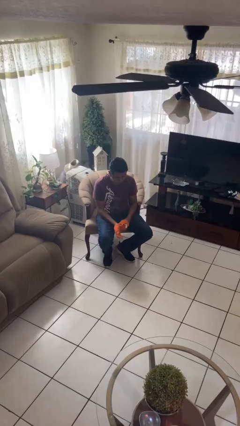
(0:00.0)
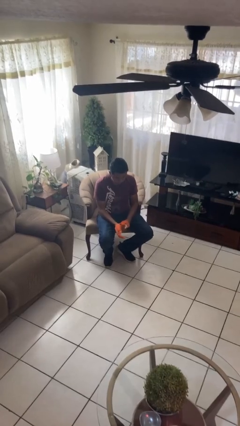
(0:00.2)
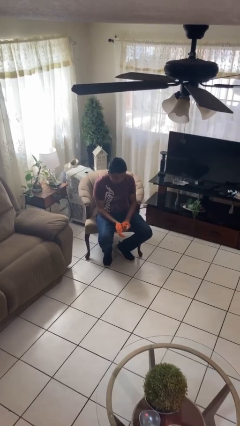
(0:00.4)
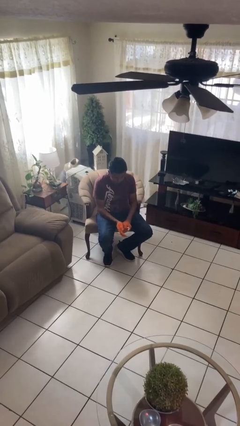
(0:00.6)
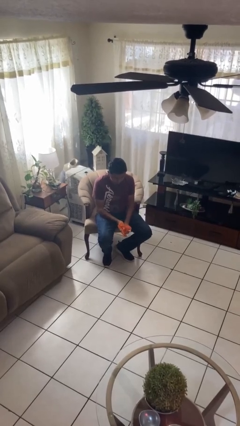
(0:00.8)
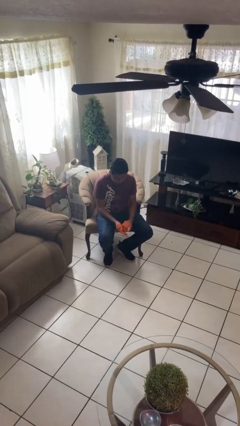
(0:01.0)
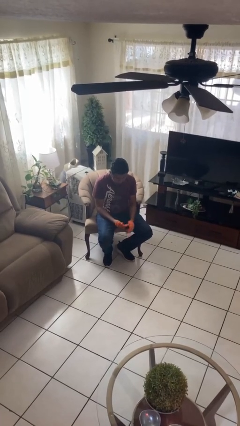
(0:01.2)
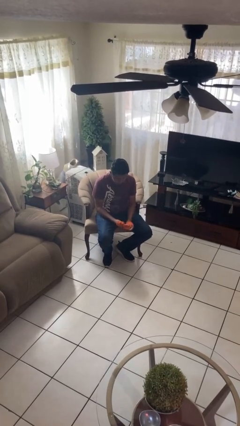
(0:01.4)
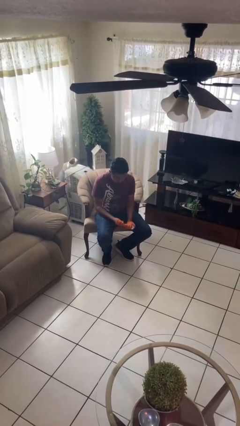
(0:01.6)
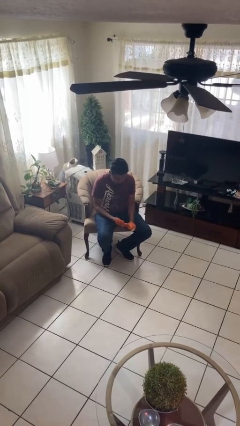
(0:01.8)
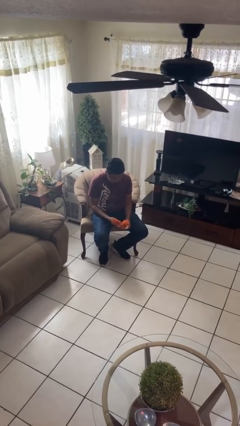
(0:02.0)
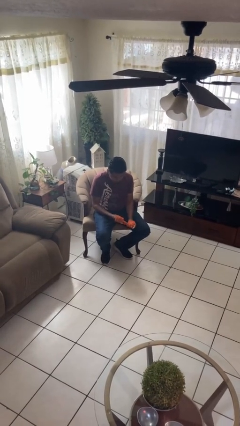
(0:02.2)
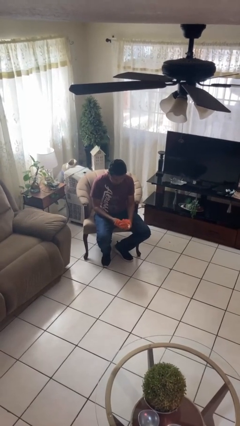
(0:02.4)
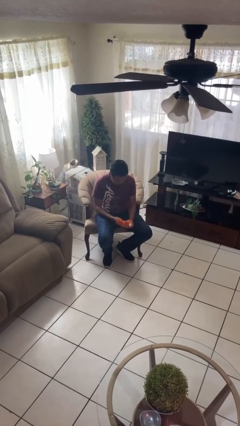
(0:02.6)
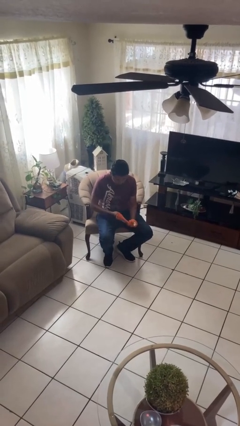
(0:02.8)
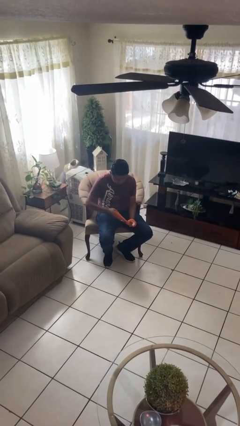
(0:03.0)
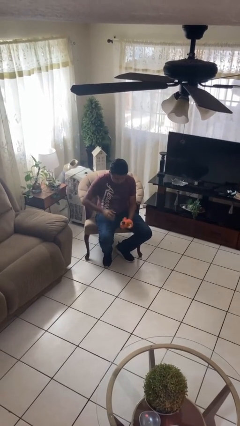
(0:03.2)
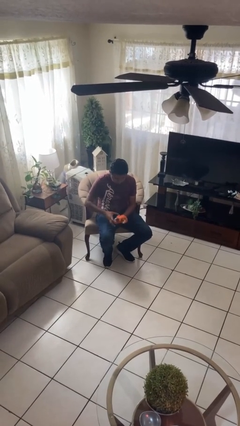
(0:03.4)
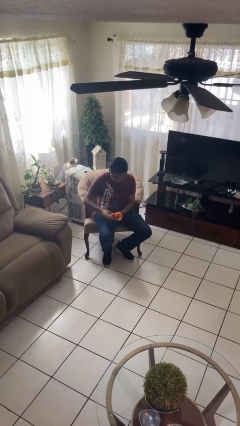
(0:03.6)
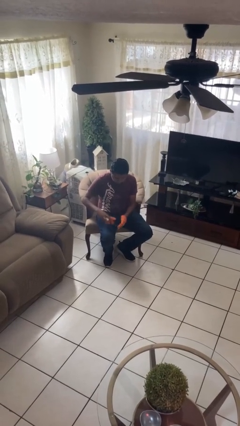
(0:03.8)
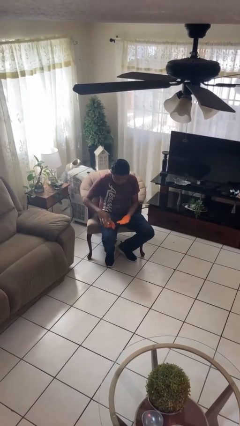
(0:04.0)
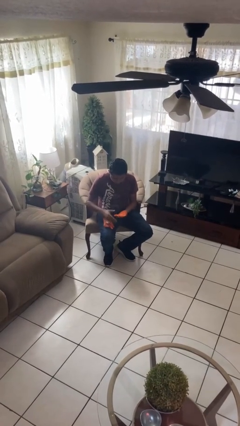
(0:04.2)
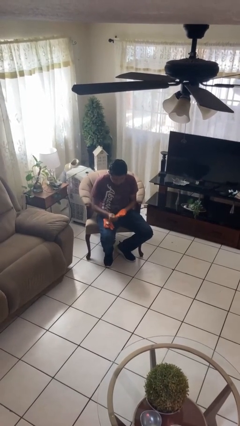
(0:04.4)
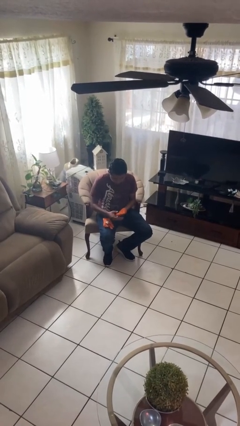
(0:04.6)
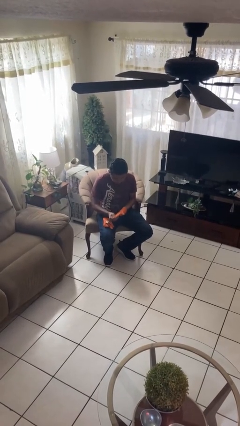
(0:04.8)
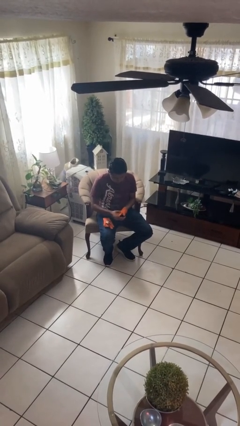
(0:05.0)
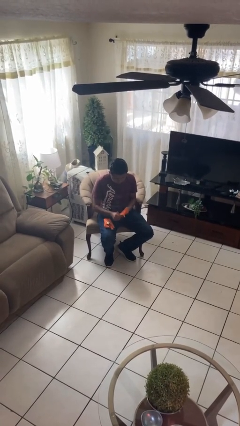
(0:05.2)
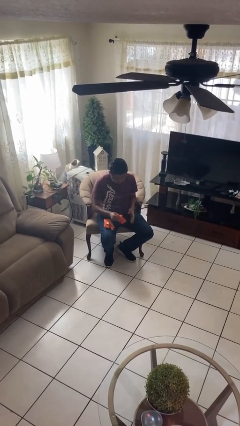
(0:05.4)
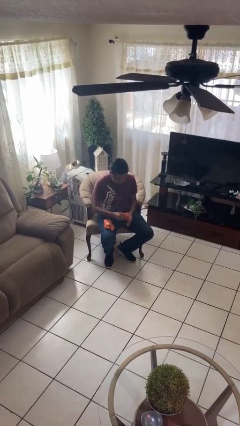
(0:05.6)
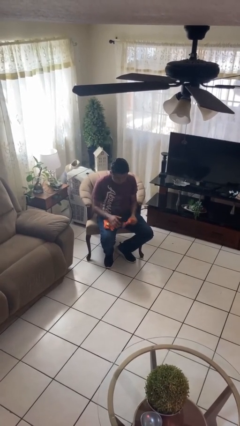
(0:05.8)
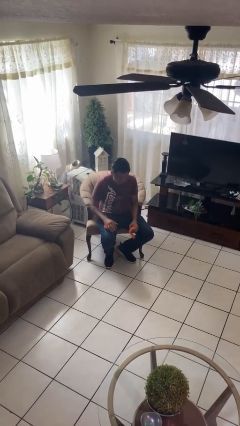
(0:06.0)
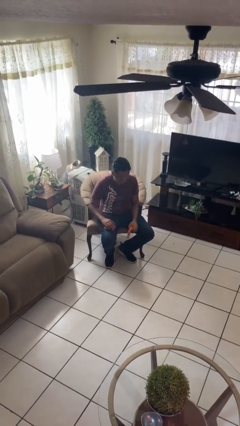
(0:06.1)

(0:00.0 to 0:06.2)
person takes off gloves

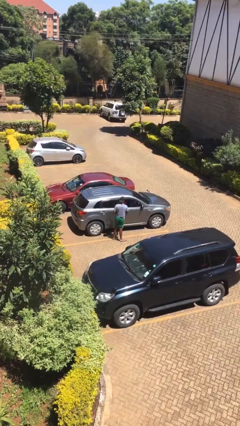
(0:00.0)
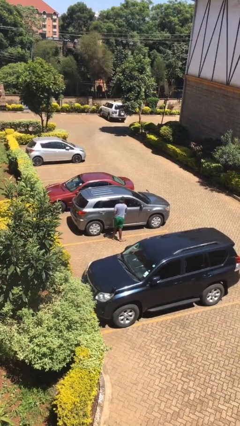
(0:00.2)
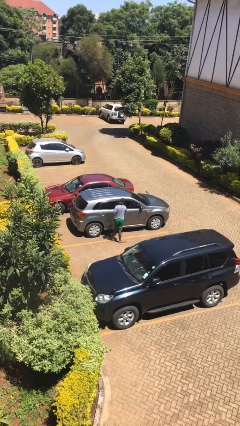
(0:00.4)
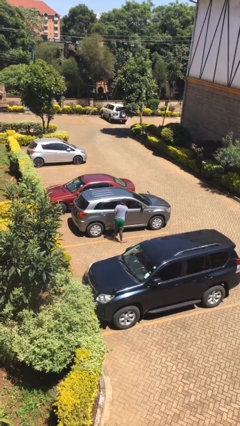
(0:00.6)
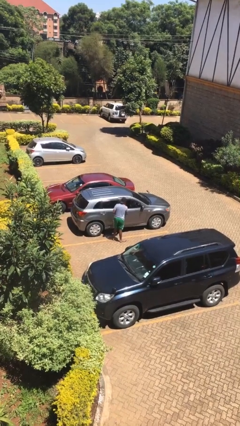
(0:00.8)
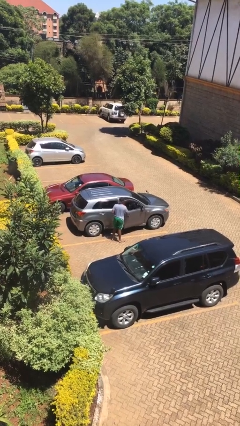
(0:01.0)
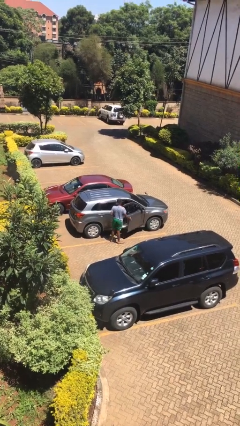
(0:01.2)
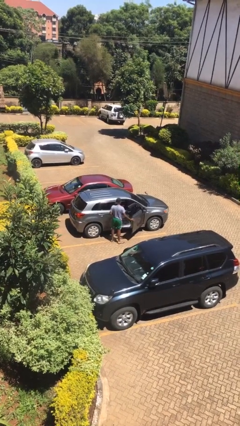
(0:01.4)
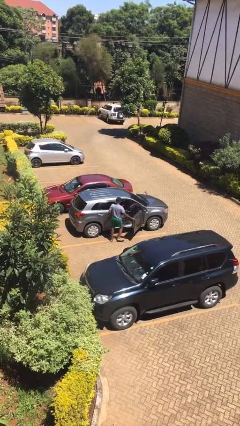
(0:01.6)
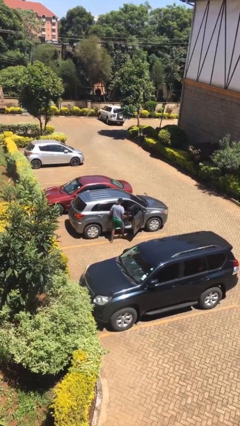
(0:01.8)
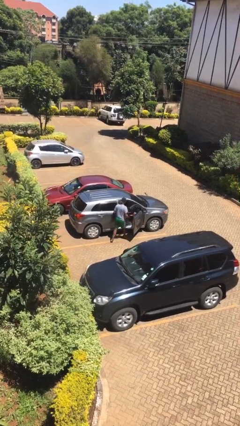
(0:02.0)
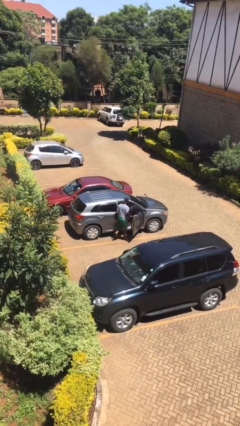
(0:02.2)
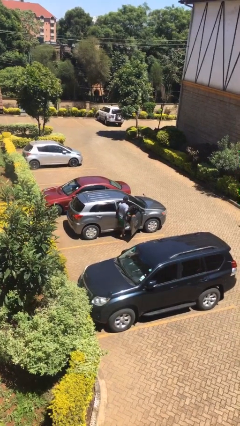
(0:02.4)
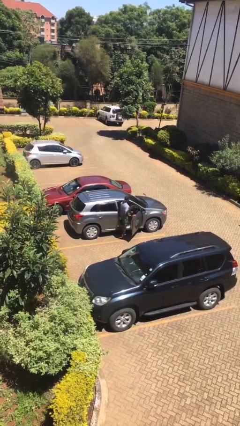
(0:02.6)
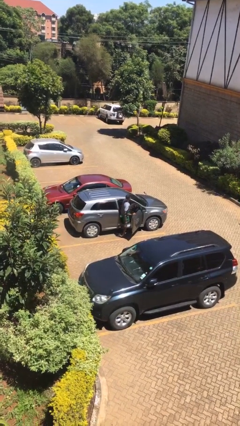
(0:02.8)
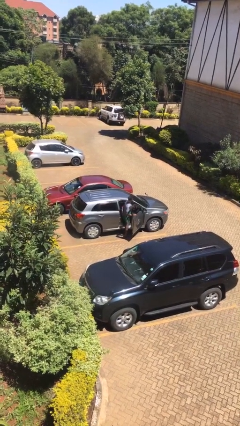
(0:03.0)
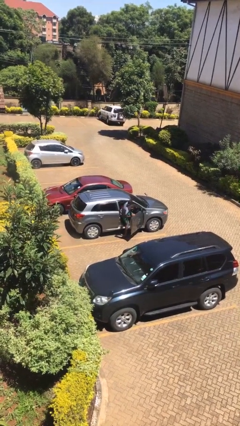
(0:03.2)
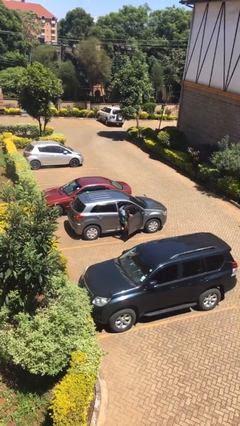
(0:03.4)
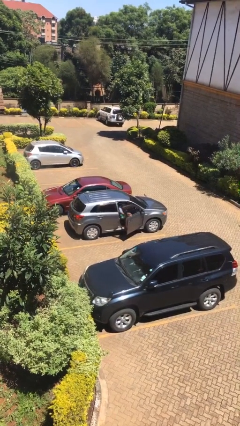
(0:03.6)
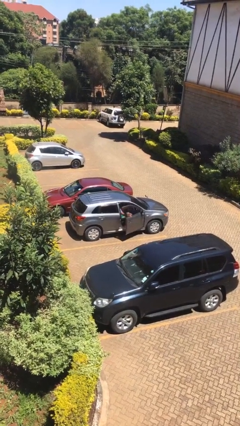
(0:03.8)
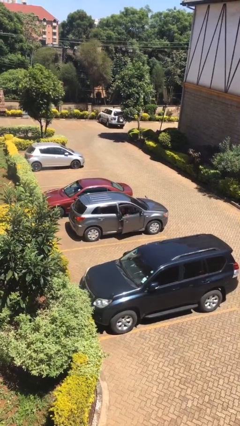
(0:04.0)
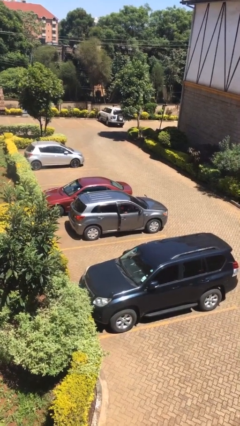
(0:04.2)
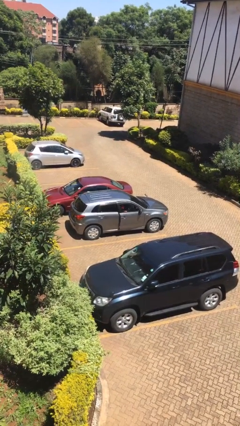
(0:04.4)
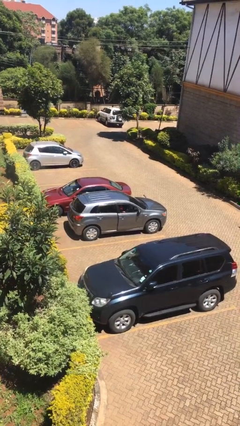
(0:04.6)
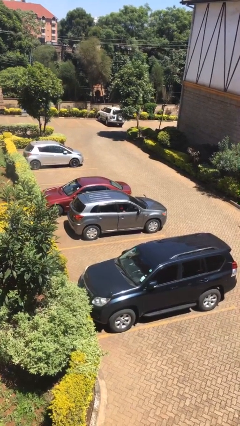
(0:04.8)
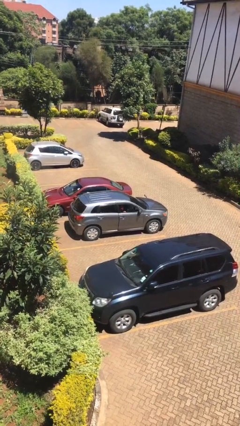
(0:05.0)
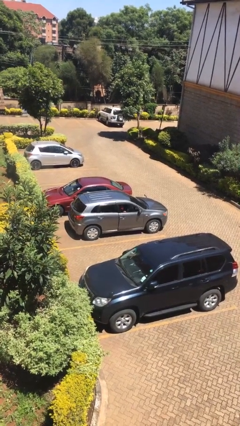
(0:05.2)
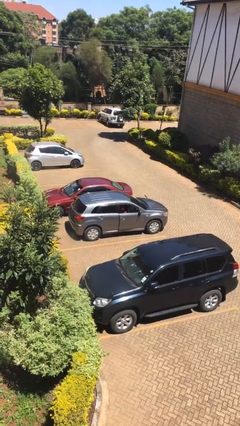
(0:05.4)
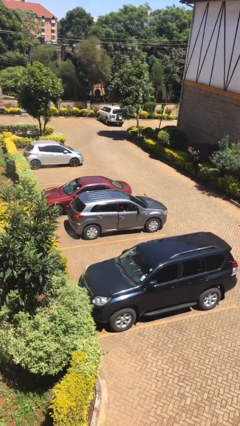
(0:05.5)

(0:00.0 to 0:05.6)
car picks up person

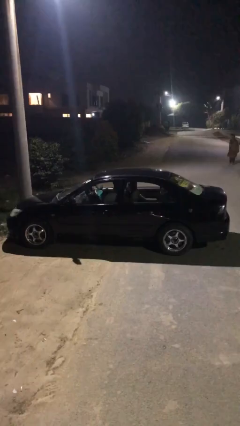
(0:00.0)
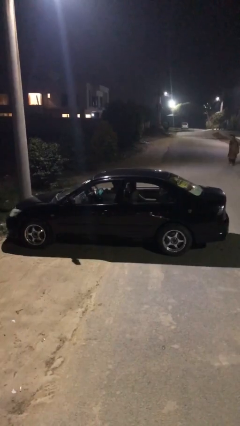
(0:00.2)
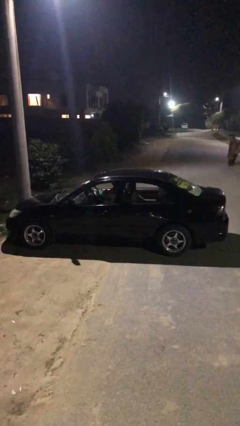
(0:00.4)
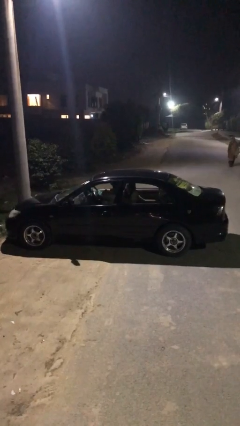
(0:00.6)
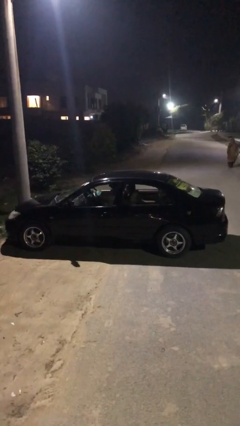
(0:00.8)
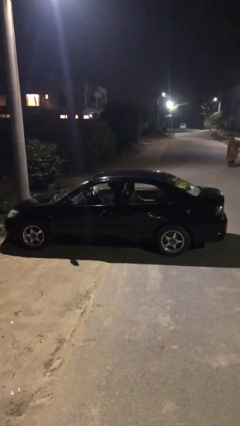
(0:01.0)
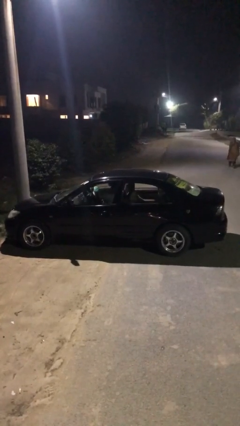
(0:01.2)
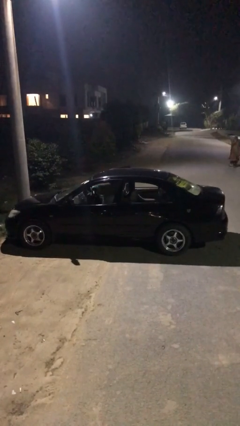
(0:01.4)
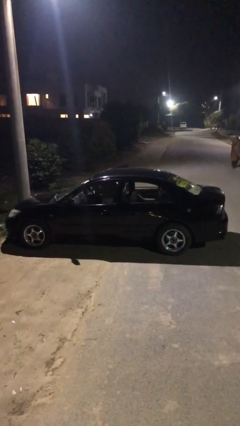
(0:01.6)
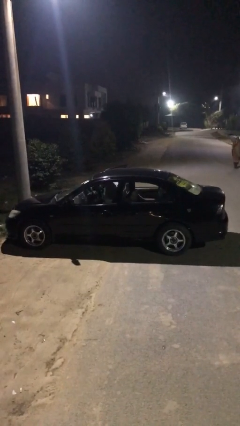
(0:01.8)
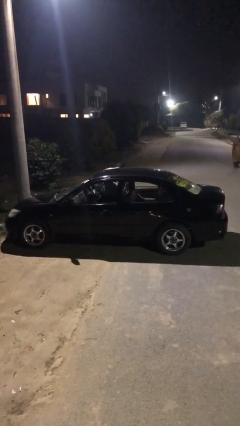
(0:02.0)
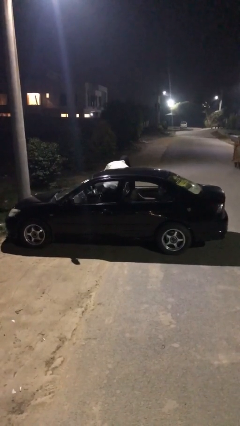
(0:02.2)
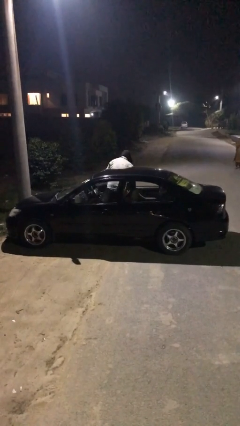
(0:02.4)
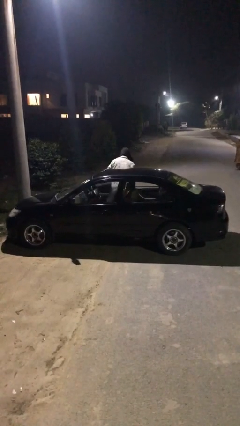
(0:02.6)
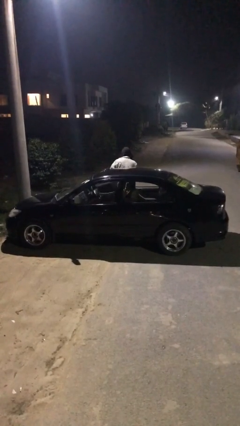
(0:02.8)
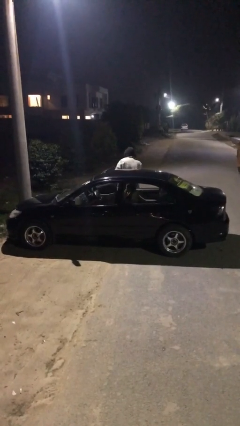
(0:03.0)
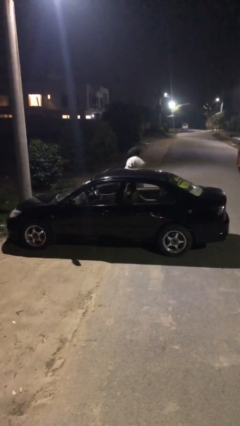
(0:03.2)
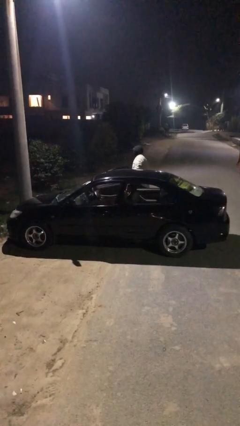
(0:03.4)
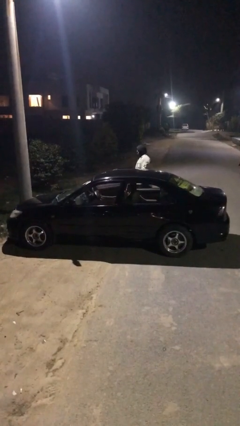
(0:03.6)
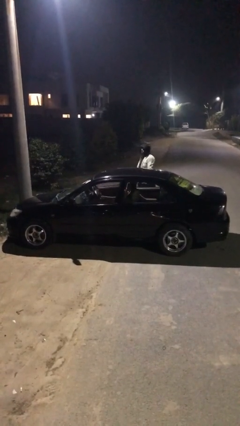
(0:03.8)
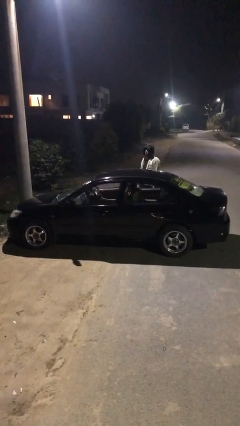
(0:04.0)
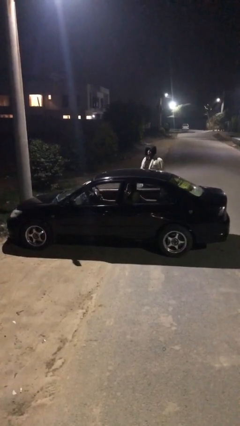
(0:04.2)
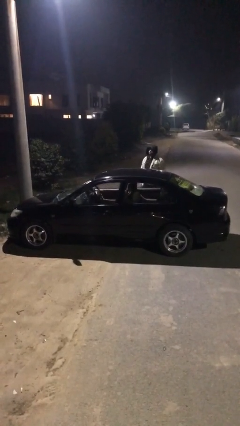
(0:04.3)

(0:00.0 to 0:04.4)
car drops off person

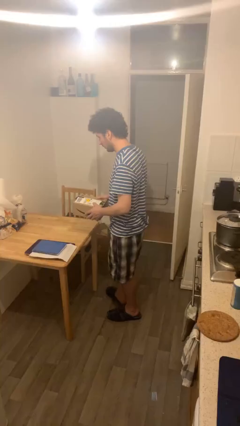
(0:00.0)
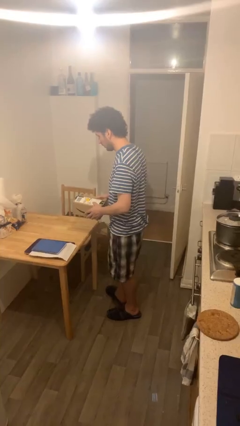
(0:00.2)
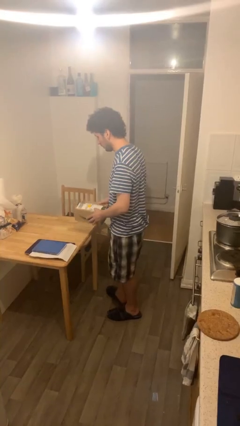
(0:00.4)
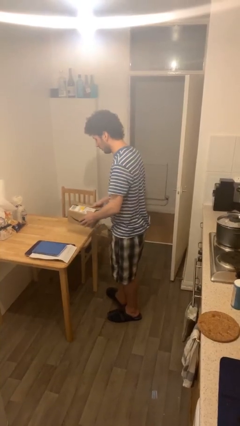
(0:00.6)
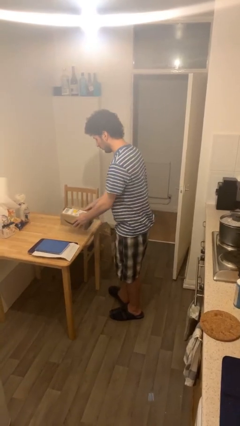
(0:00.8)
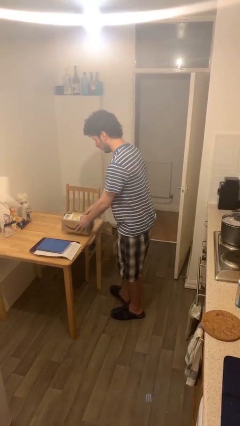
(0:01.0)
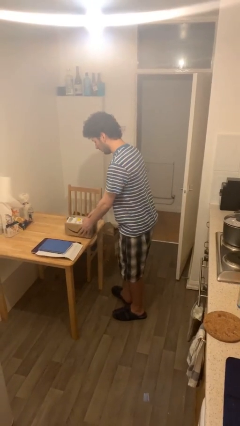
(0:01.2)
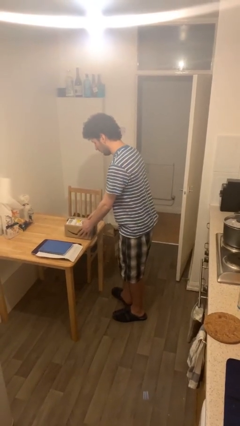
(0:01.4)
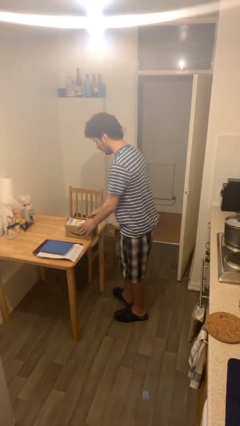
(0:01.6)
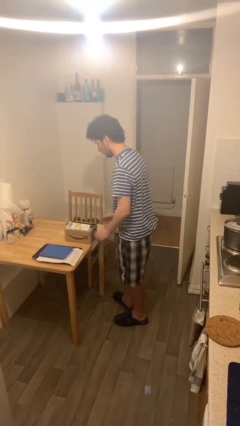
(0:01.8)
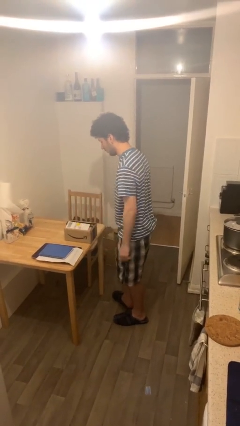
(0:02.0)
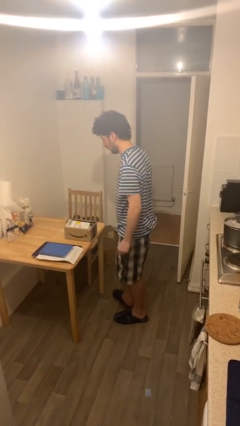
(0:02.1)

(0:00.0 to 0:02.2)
person puts down object on table
